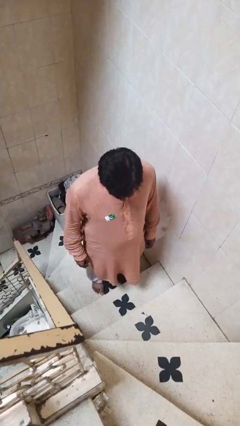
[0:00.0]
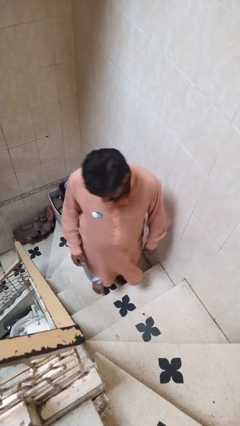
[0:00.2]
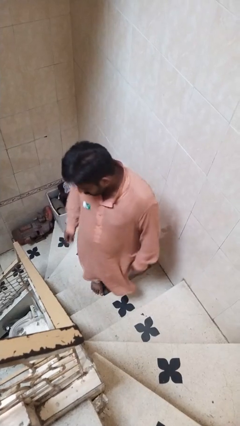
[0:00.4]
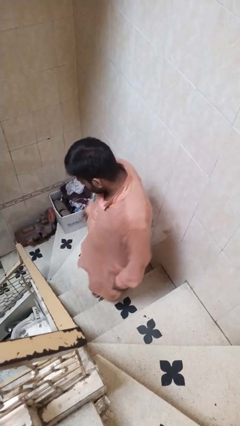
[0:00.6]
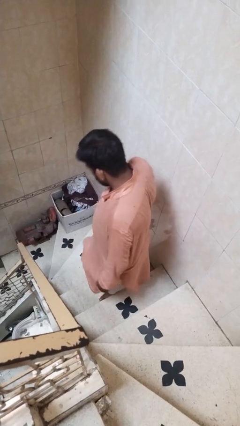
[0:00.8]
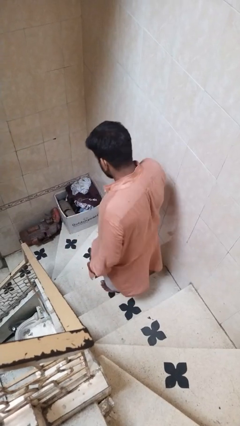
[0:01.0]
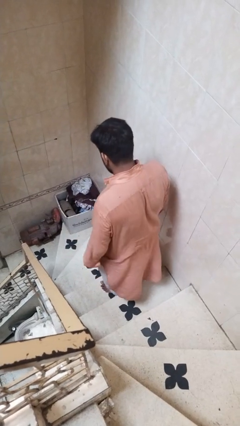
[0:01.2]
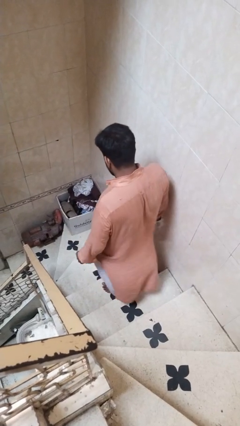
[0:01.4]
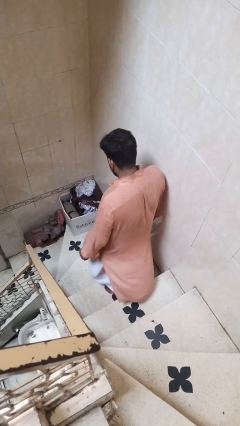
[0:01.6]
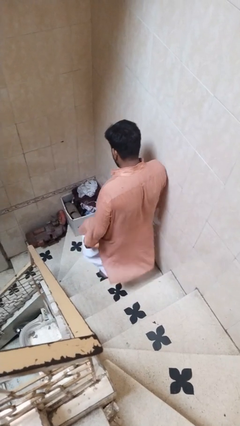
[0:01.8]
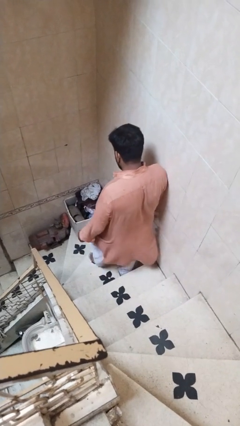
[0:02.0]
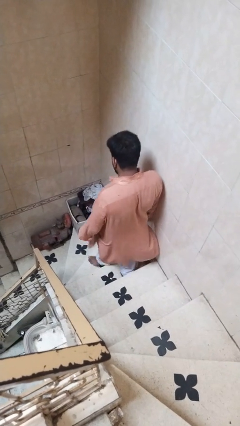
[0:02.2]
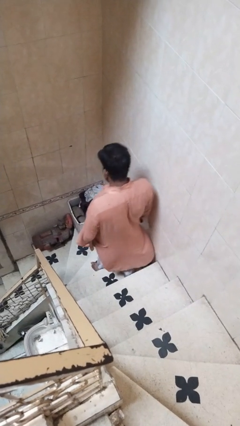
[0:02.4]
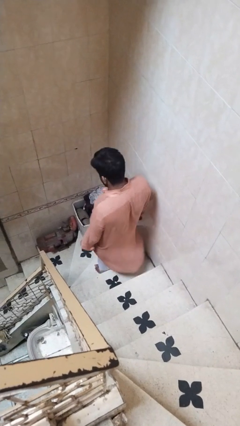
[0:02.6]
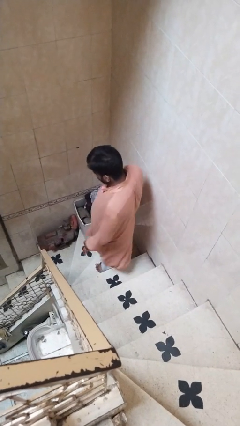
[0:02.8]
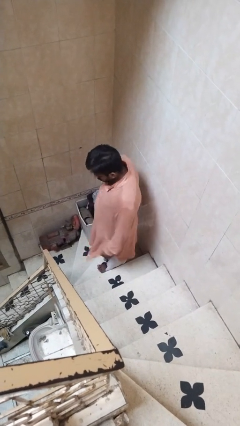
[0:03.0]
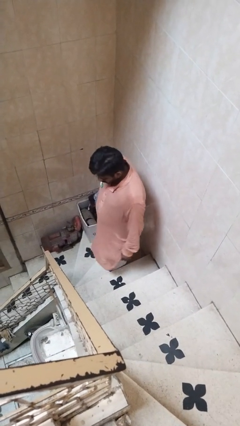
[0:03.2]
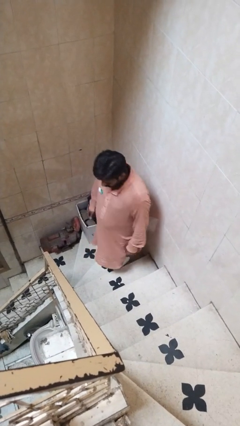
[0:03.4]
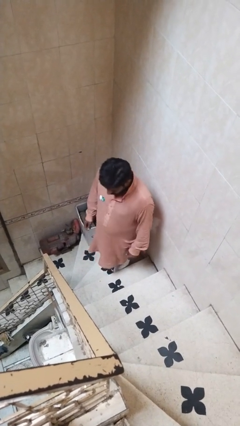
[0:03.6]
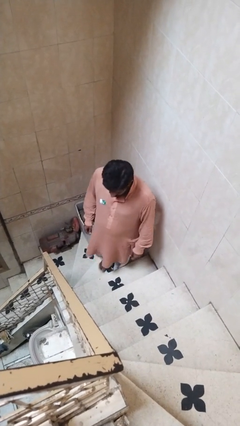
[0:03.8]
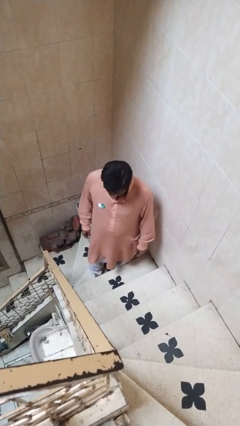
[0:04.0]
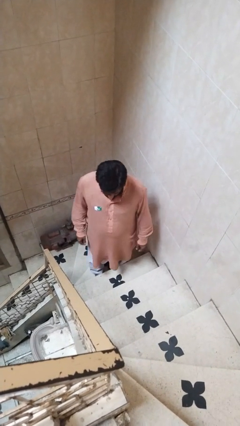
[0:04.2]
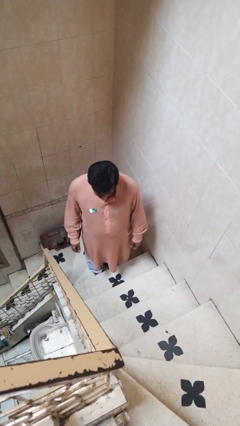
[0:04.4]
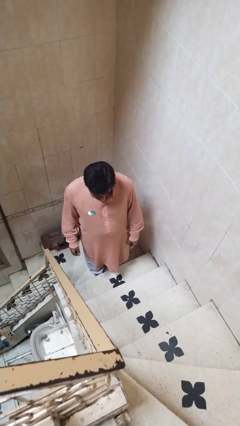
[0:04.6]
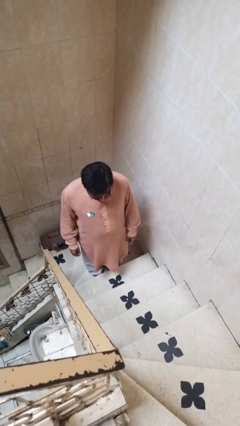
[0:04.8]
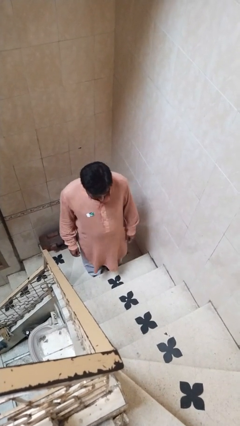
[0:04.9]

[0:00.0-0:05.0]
person climbs down stairs

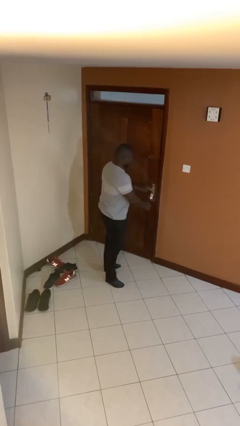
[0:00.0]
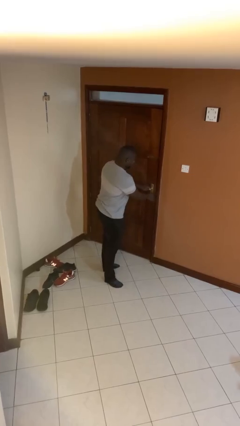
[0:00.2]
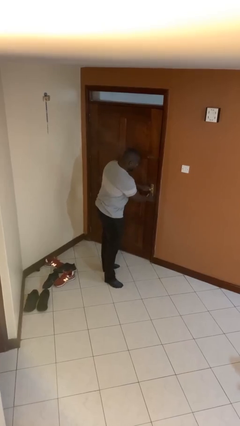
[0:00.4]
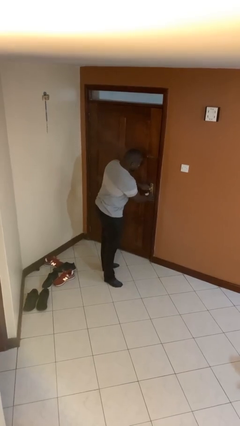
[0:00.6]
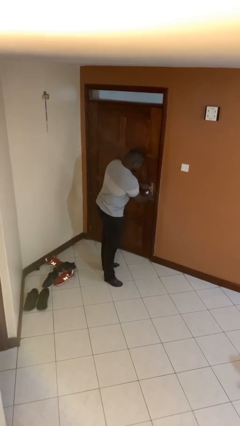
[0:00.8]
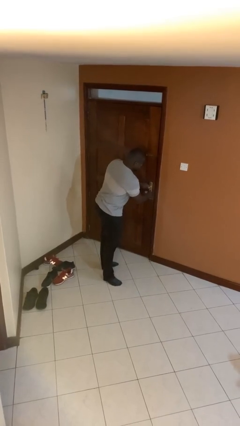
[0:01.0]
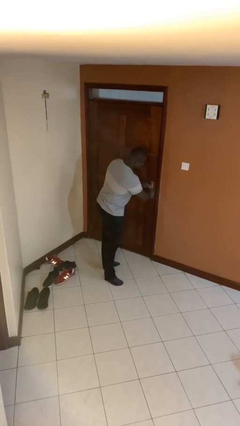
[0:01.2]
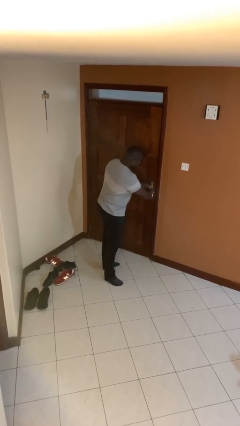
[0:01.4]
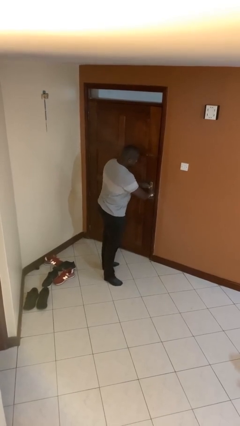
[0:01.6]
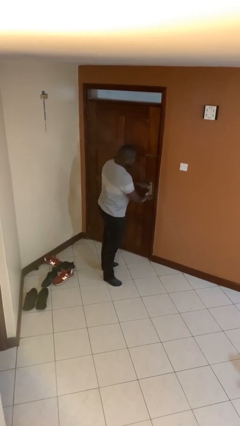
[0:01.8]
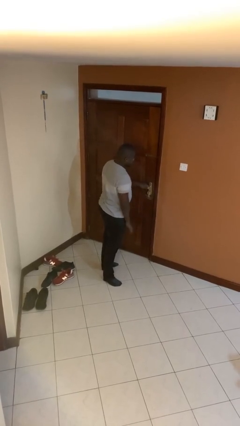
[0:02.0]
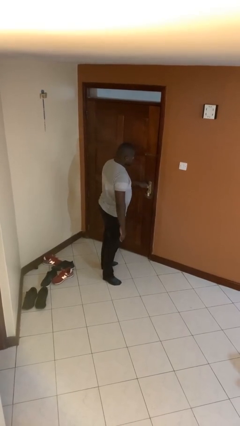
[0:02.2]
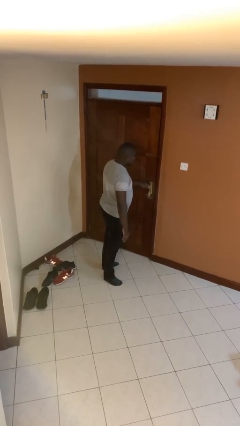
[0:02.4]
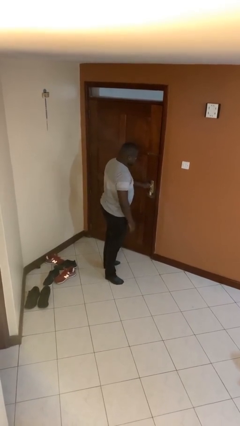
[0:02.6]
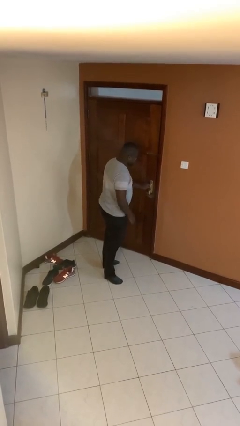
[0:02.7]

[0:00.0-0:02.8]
person unlocks door with keys

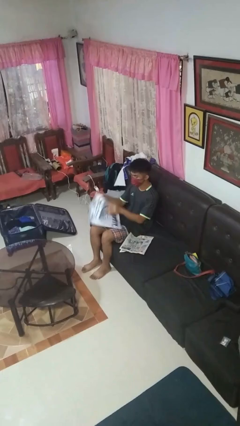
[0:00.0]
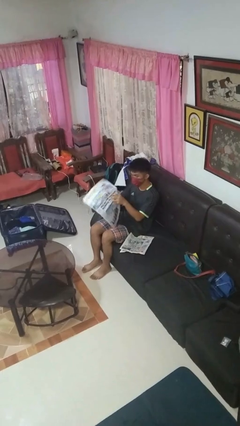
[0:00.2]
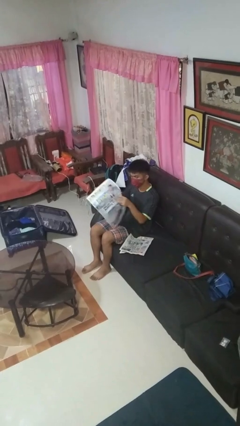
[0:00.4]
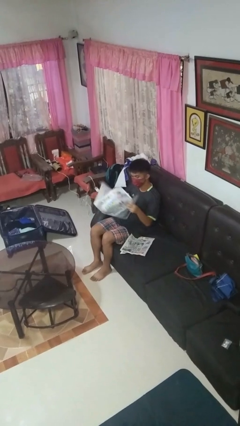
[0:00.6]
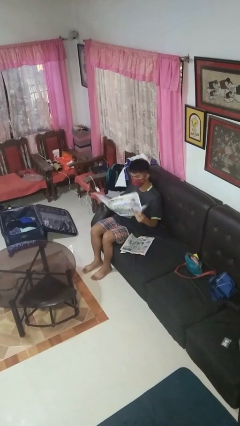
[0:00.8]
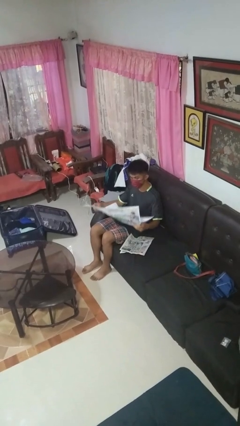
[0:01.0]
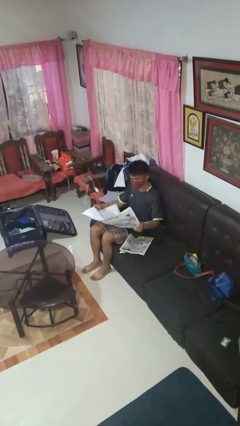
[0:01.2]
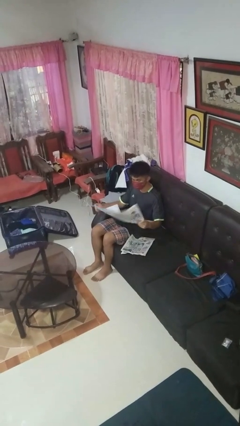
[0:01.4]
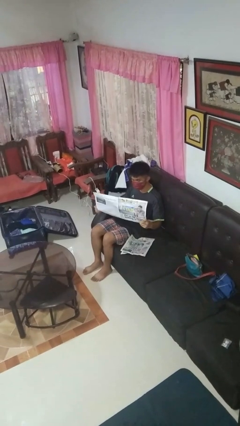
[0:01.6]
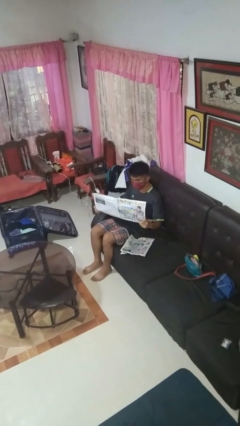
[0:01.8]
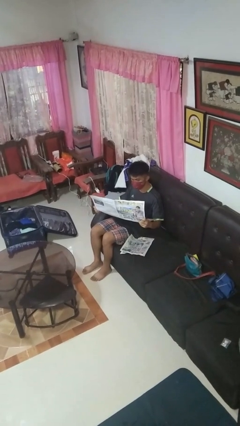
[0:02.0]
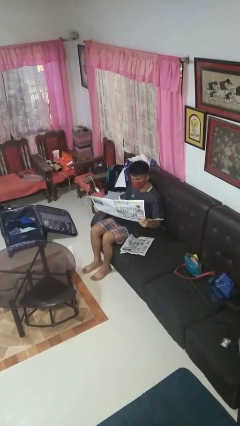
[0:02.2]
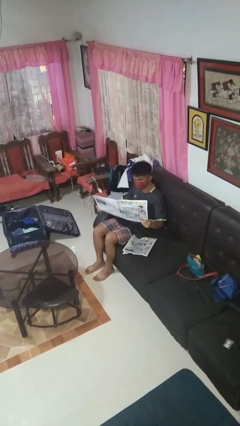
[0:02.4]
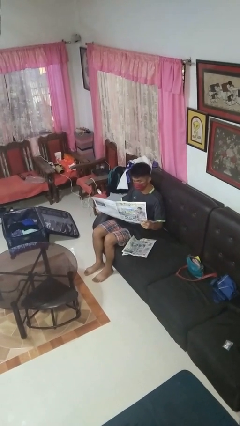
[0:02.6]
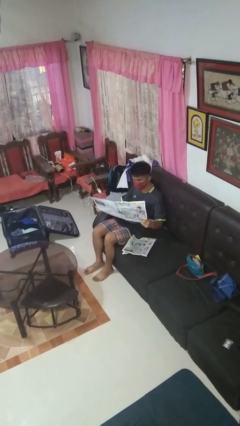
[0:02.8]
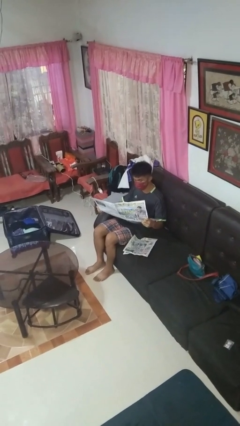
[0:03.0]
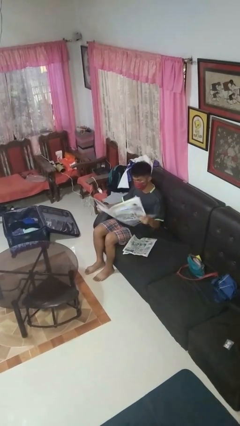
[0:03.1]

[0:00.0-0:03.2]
person reads newspaper

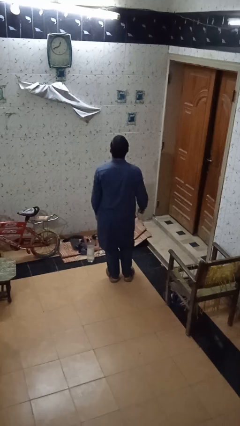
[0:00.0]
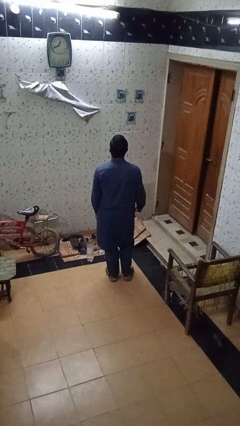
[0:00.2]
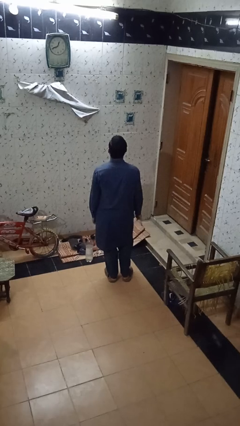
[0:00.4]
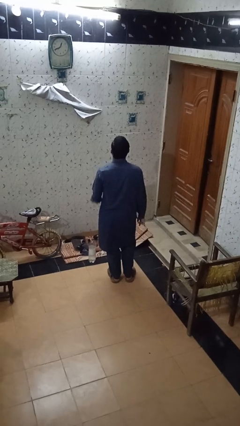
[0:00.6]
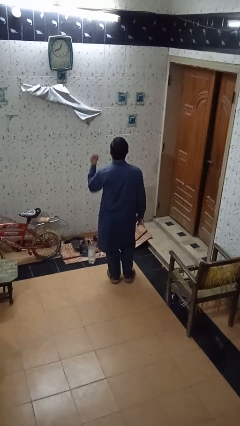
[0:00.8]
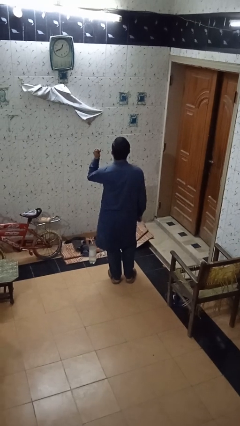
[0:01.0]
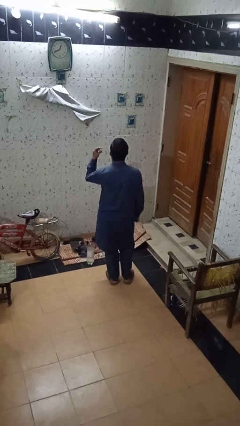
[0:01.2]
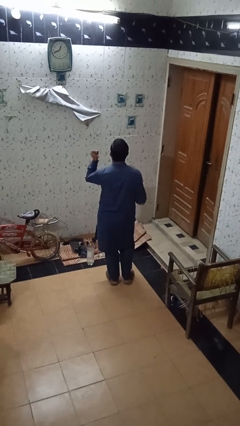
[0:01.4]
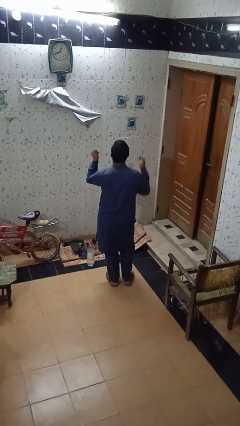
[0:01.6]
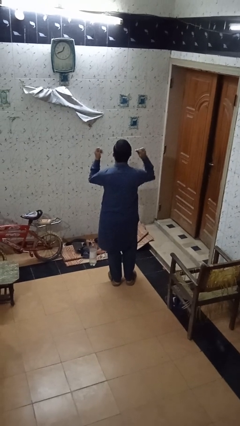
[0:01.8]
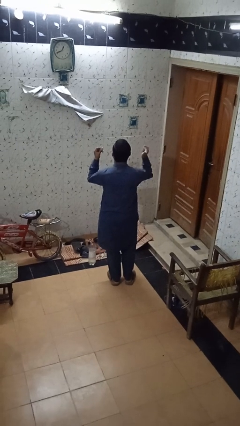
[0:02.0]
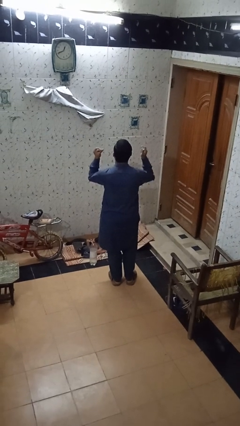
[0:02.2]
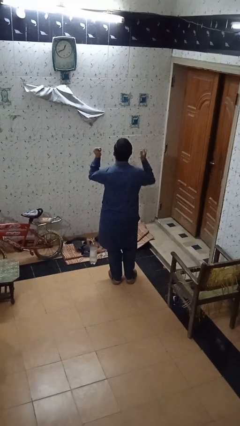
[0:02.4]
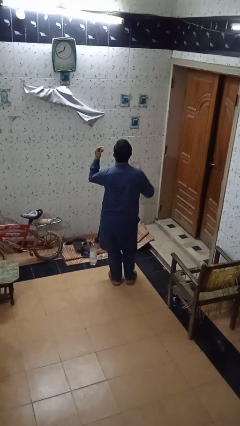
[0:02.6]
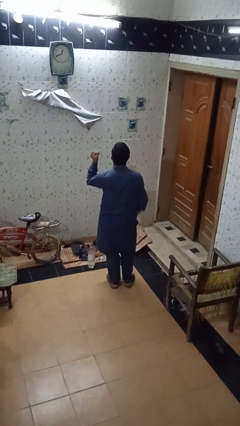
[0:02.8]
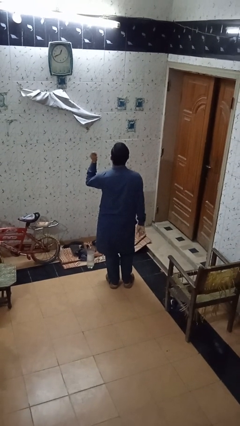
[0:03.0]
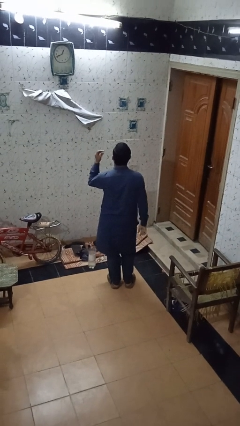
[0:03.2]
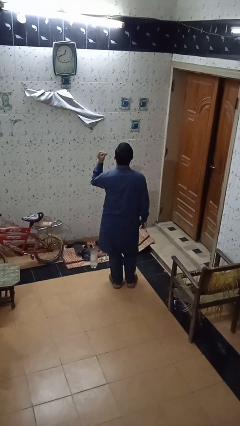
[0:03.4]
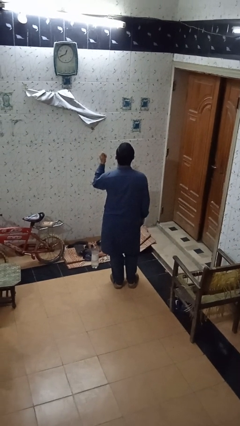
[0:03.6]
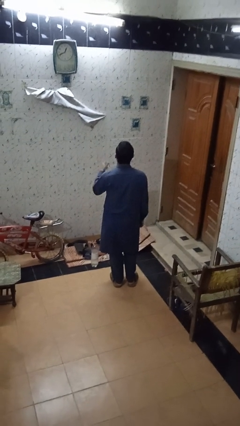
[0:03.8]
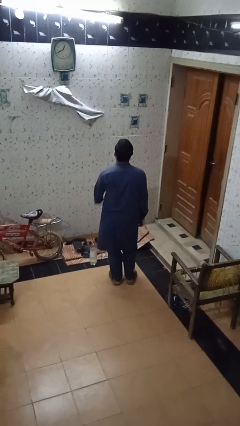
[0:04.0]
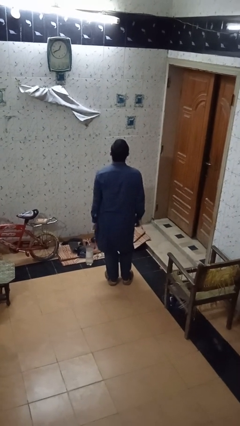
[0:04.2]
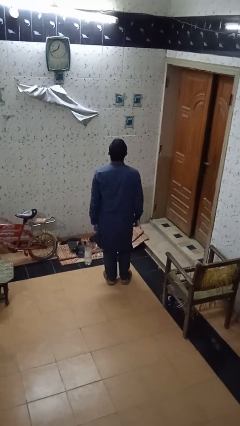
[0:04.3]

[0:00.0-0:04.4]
person snaps fingers

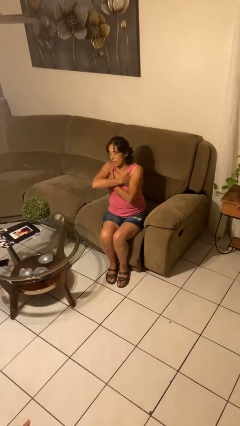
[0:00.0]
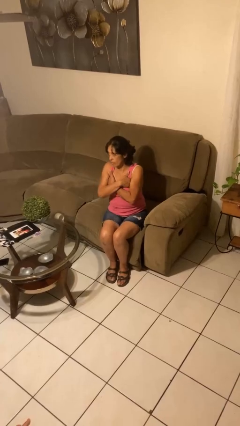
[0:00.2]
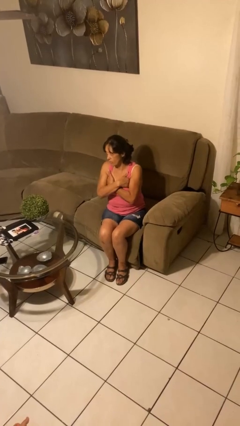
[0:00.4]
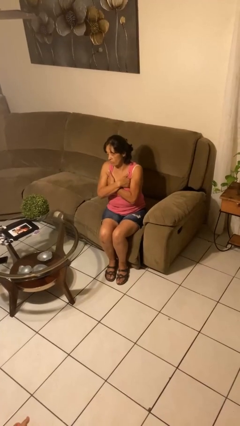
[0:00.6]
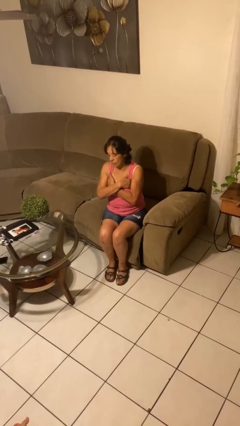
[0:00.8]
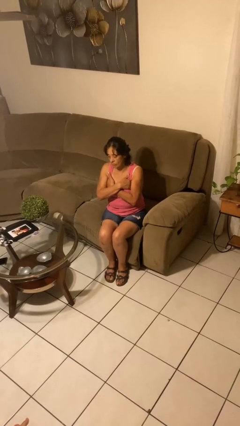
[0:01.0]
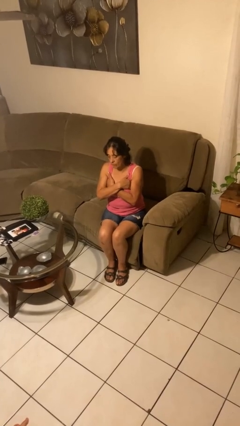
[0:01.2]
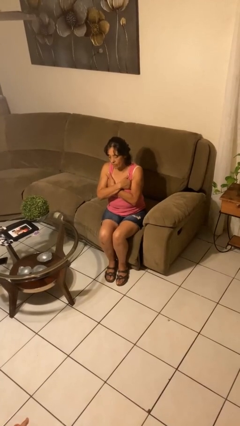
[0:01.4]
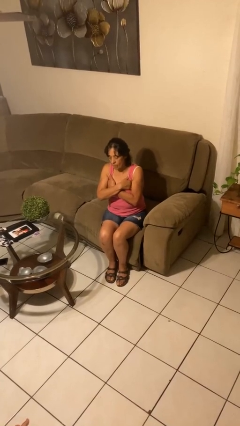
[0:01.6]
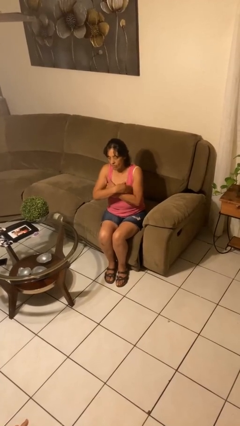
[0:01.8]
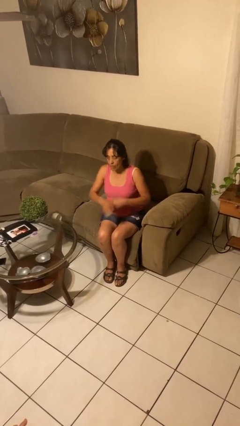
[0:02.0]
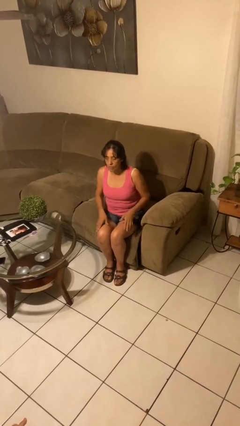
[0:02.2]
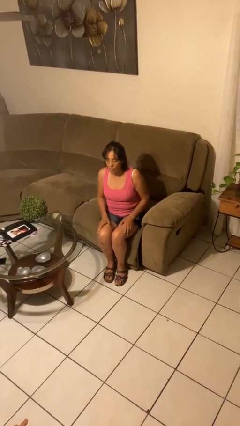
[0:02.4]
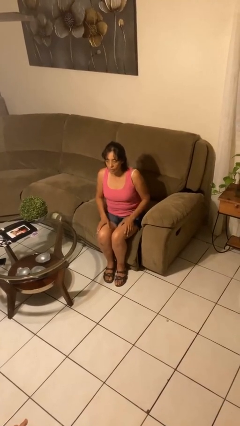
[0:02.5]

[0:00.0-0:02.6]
person gestures arms x
